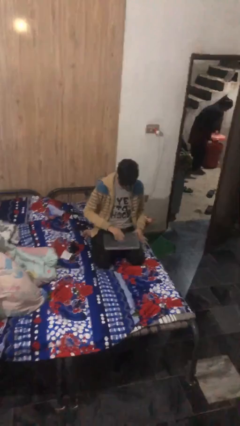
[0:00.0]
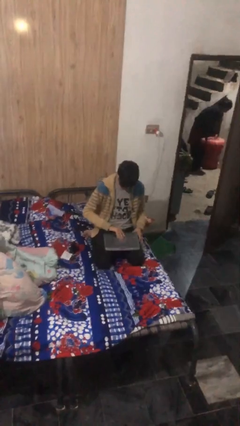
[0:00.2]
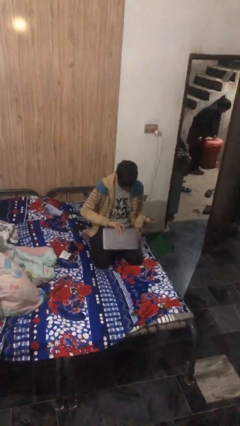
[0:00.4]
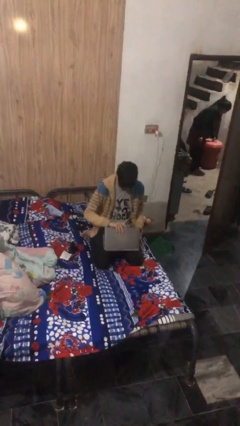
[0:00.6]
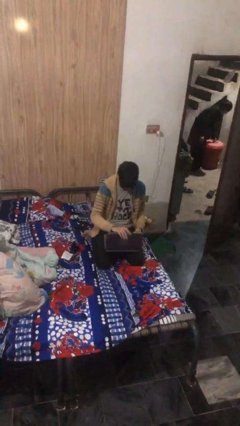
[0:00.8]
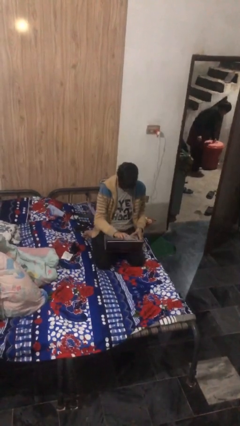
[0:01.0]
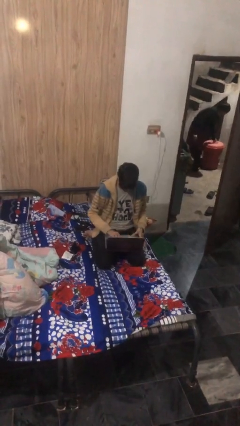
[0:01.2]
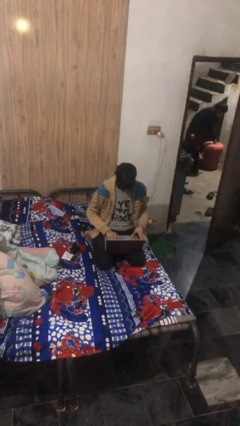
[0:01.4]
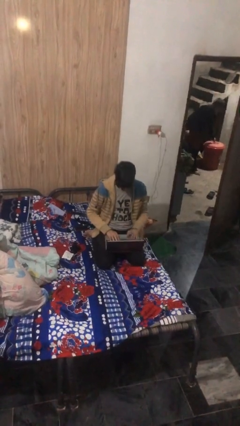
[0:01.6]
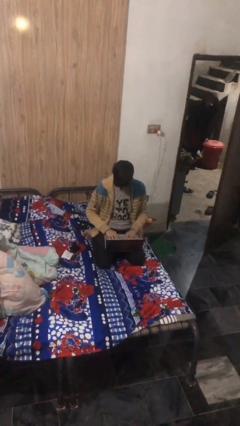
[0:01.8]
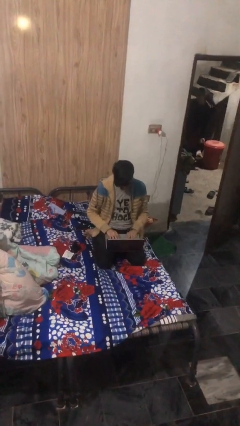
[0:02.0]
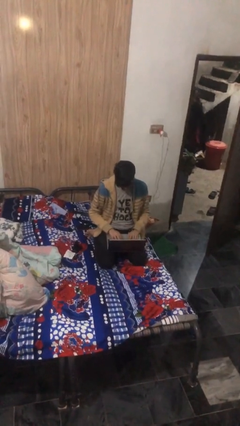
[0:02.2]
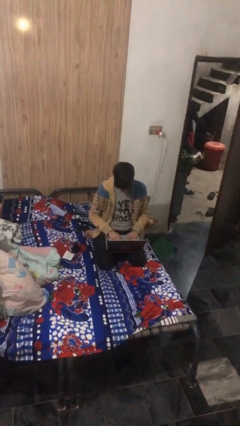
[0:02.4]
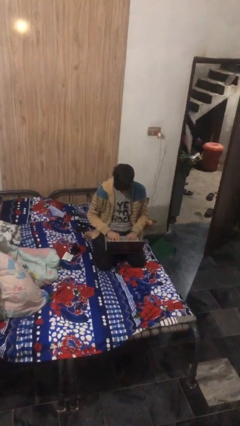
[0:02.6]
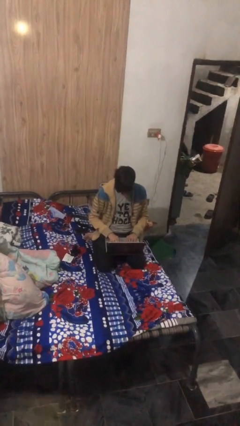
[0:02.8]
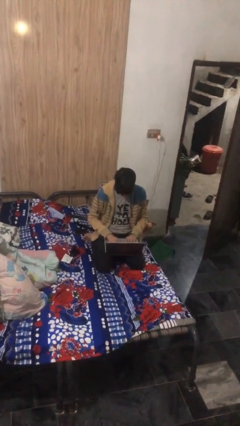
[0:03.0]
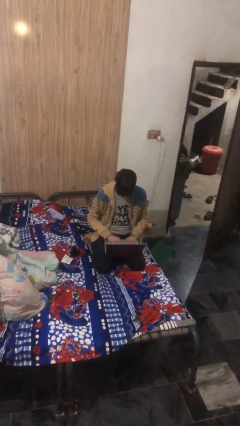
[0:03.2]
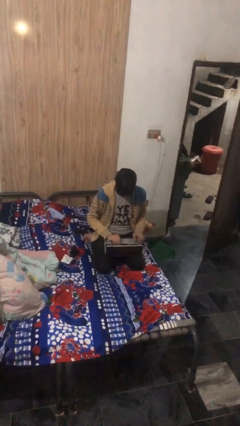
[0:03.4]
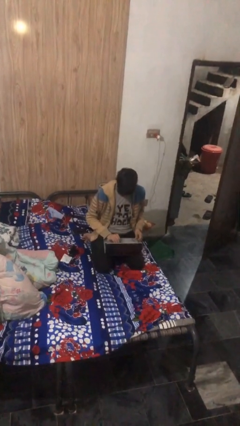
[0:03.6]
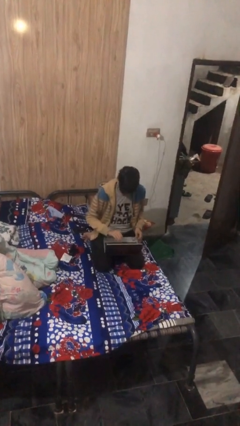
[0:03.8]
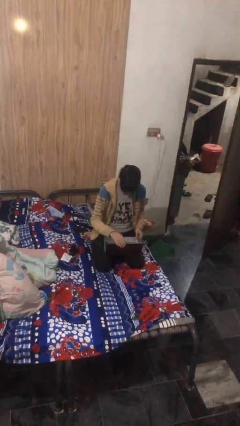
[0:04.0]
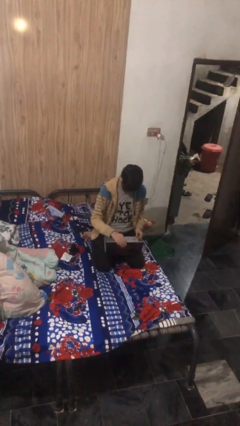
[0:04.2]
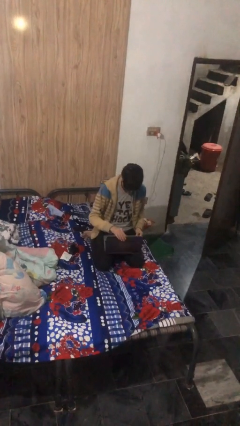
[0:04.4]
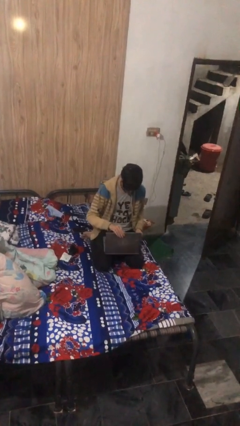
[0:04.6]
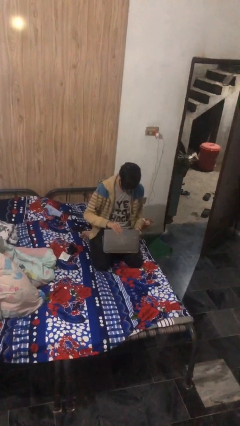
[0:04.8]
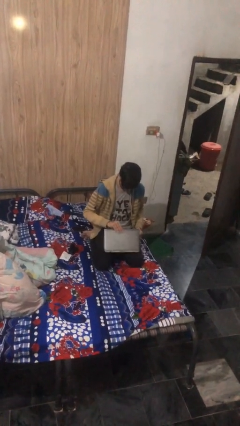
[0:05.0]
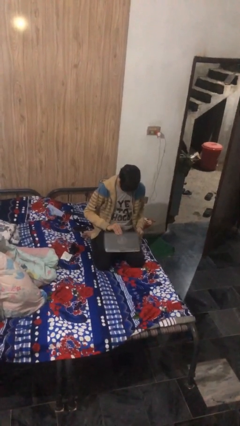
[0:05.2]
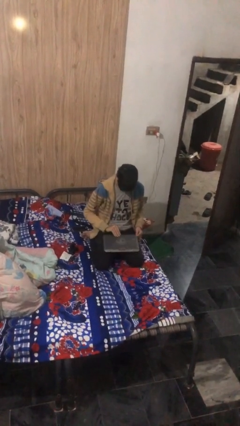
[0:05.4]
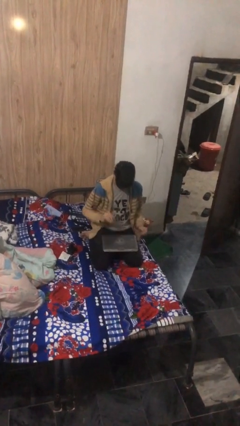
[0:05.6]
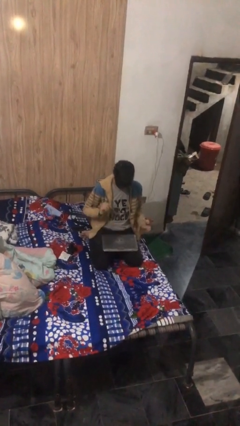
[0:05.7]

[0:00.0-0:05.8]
person interacts with laptop

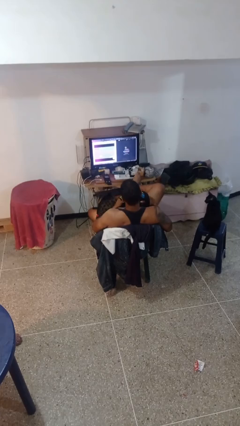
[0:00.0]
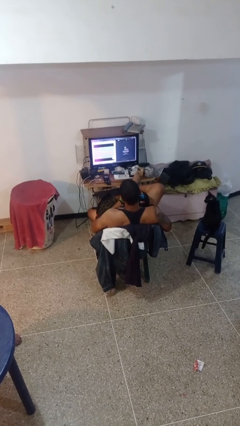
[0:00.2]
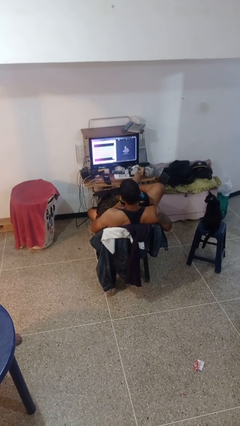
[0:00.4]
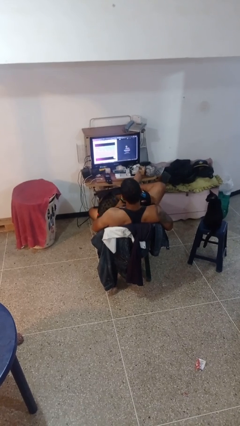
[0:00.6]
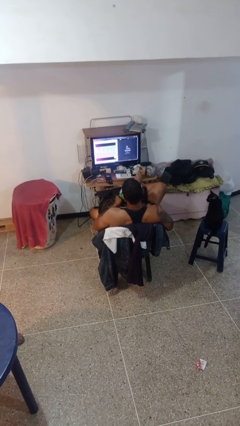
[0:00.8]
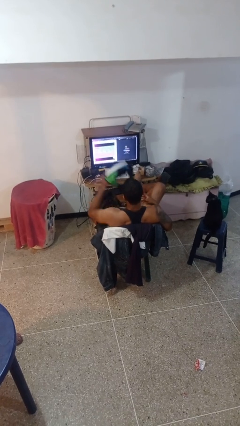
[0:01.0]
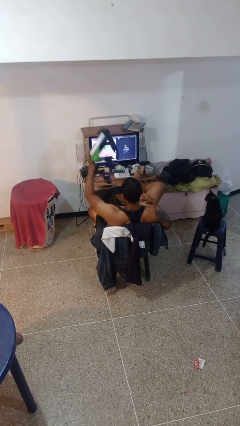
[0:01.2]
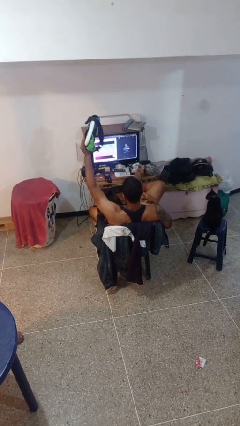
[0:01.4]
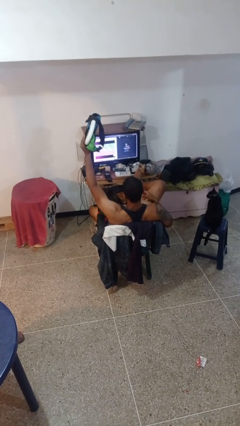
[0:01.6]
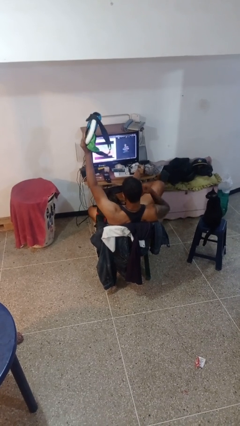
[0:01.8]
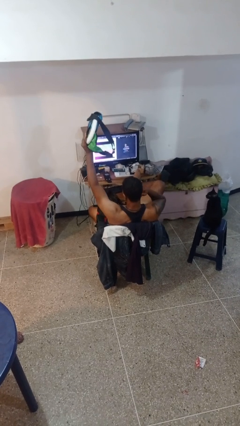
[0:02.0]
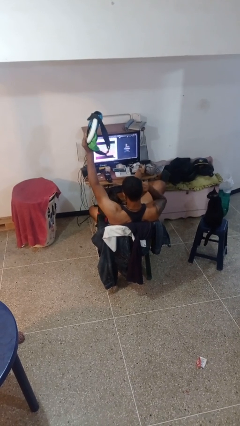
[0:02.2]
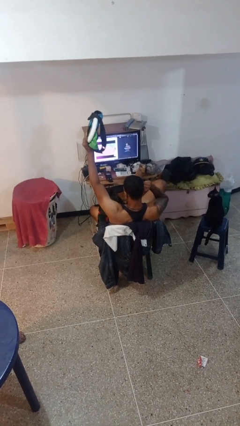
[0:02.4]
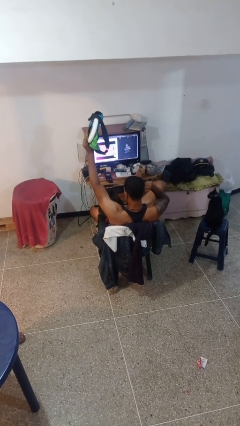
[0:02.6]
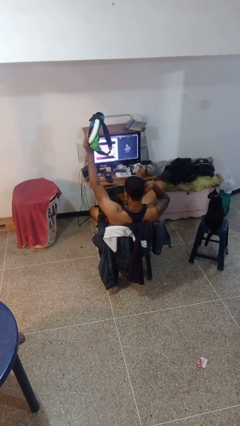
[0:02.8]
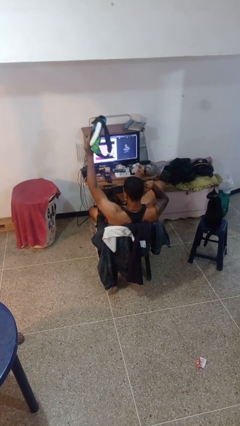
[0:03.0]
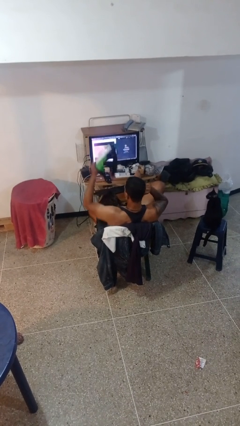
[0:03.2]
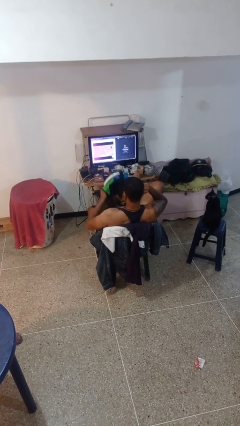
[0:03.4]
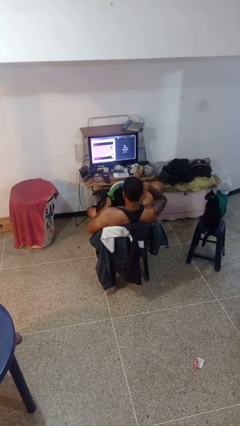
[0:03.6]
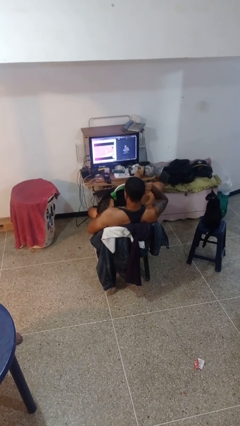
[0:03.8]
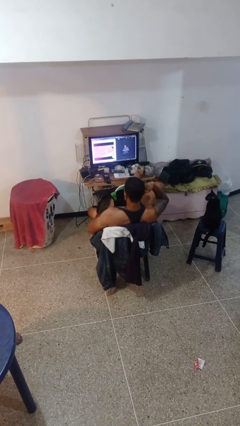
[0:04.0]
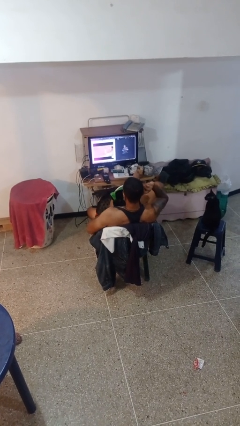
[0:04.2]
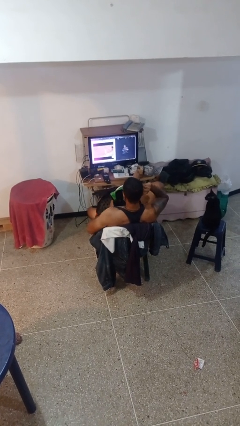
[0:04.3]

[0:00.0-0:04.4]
person holds object above head

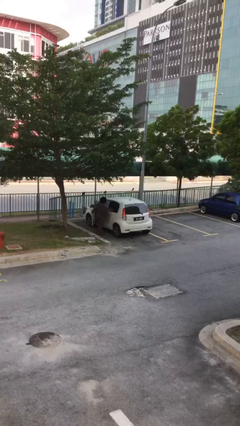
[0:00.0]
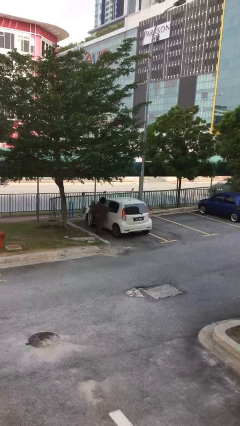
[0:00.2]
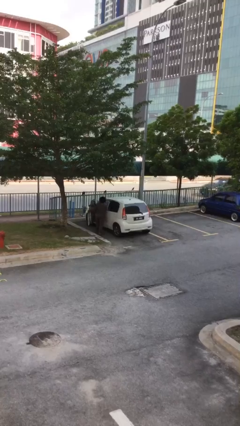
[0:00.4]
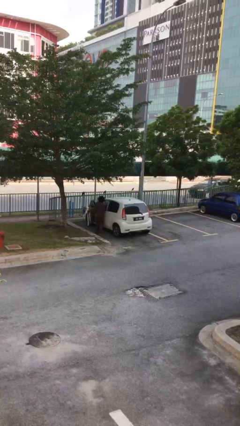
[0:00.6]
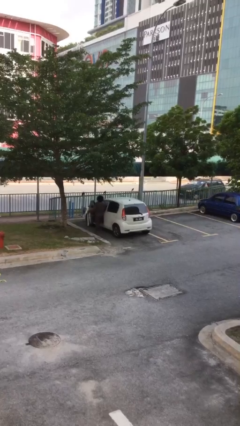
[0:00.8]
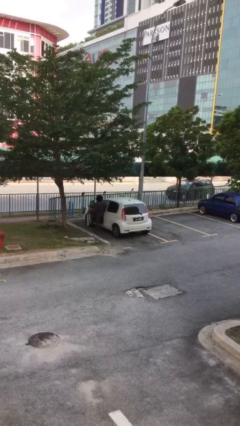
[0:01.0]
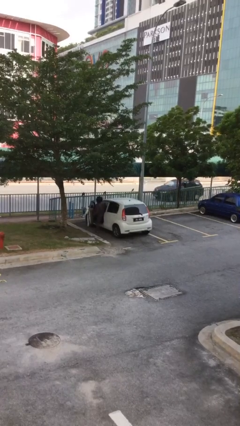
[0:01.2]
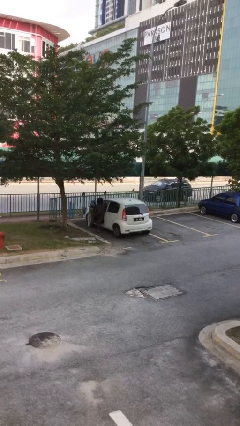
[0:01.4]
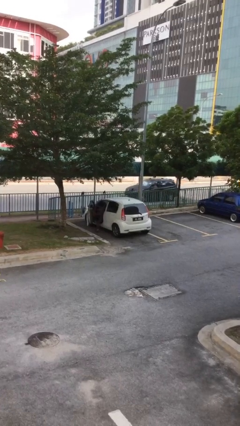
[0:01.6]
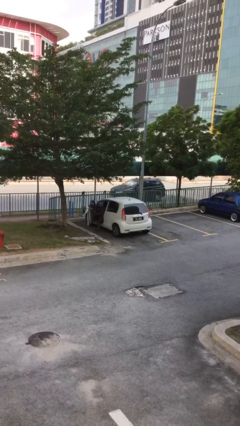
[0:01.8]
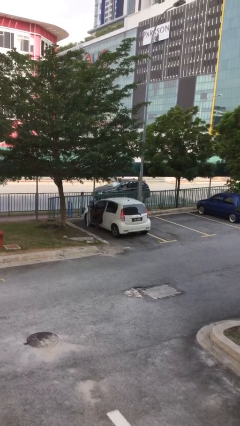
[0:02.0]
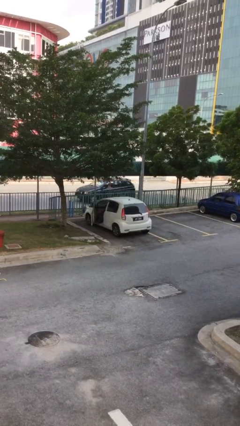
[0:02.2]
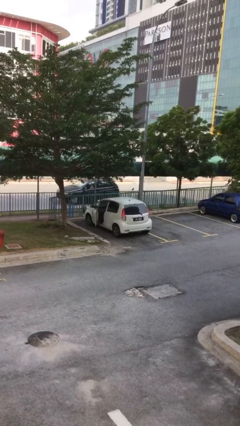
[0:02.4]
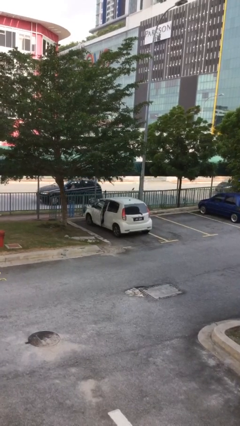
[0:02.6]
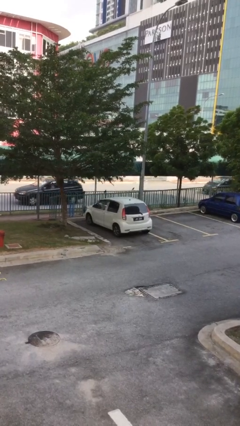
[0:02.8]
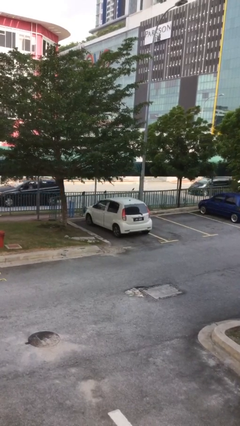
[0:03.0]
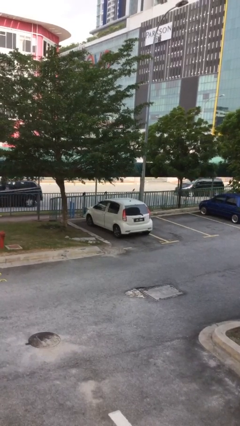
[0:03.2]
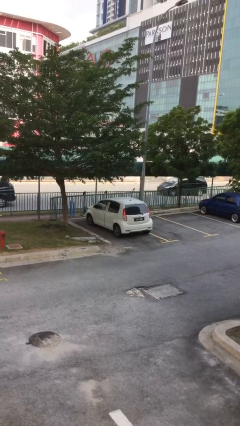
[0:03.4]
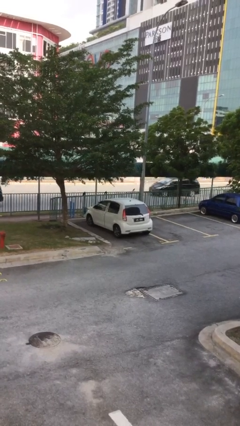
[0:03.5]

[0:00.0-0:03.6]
car picks up person

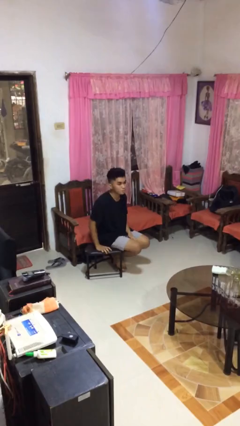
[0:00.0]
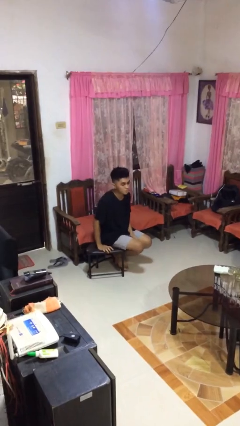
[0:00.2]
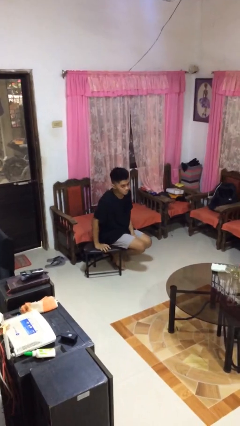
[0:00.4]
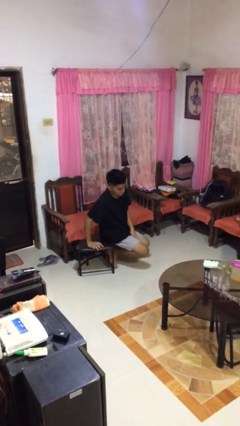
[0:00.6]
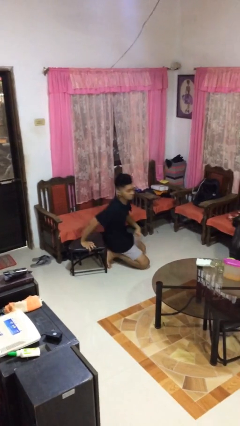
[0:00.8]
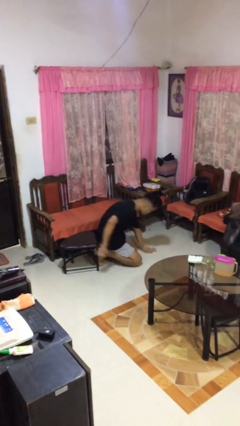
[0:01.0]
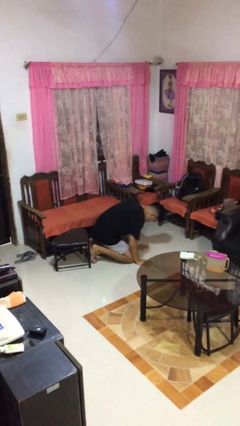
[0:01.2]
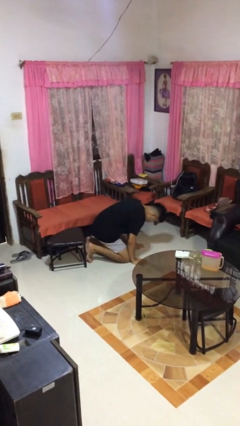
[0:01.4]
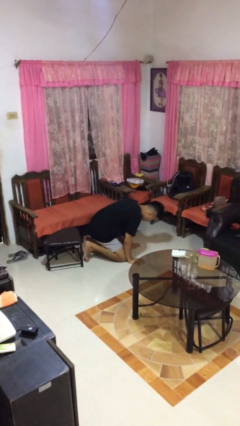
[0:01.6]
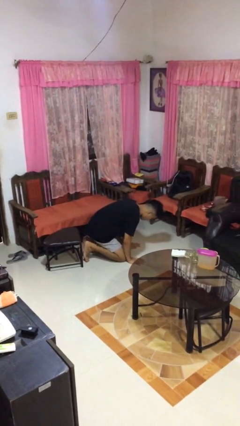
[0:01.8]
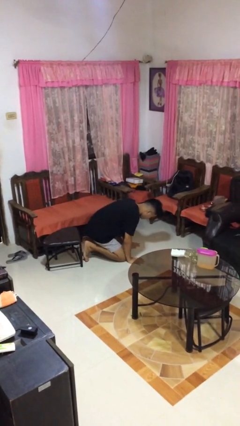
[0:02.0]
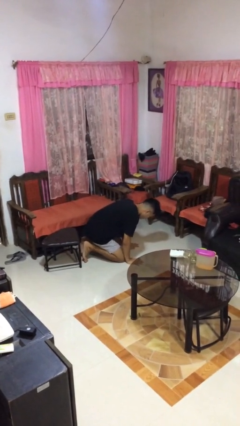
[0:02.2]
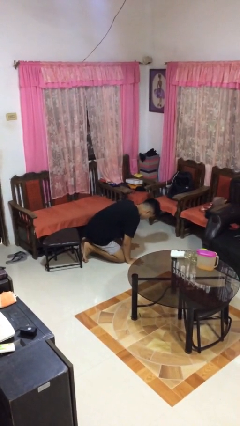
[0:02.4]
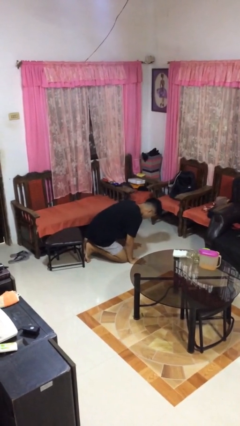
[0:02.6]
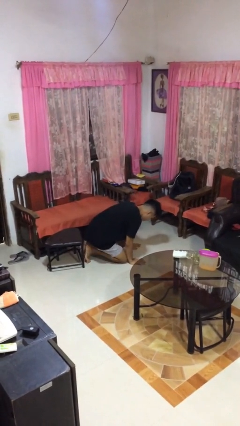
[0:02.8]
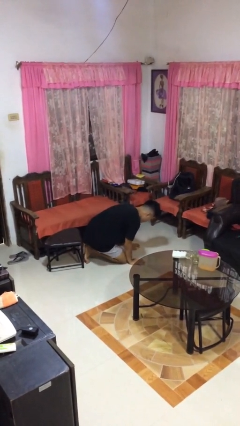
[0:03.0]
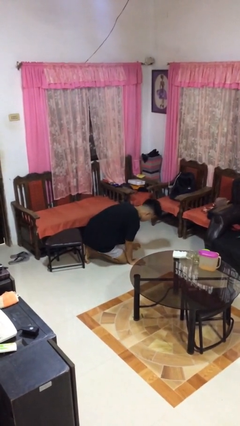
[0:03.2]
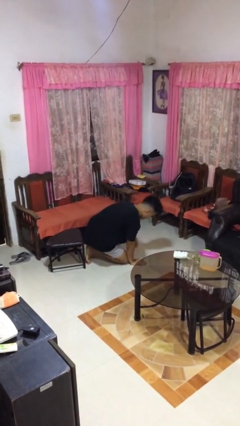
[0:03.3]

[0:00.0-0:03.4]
person falls from chair
